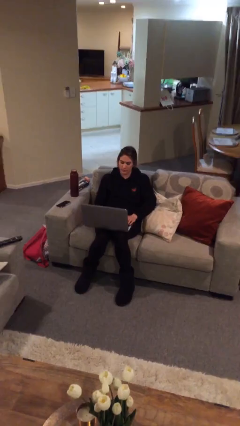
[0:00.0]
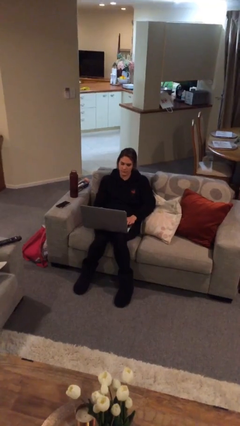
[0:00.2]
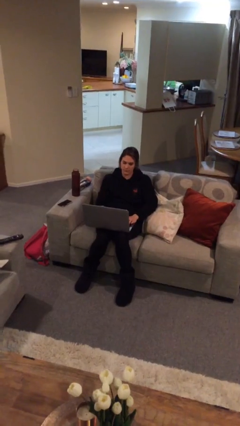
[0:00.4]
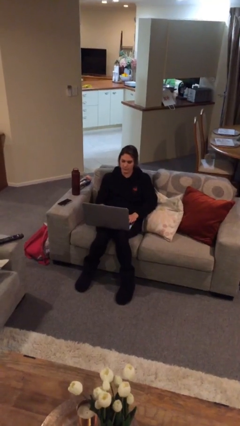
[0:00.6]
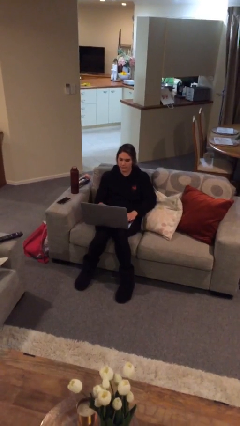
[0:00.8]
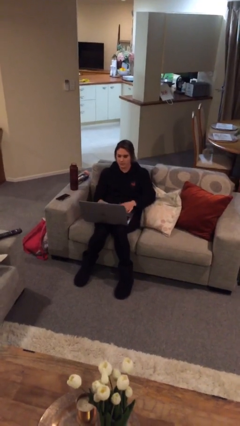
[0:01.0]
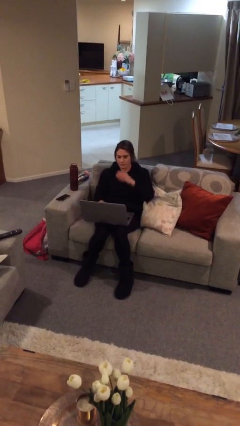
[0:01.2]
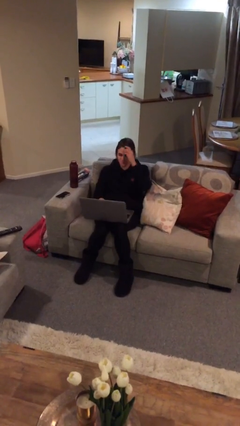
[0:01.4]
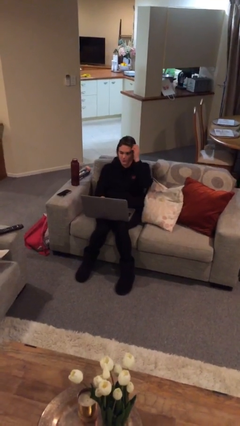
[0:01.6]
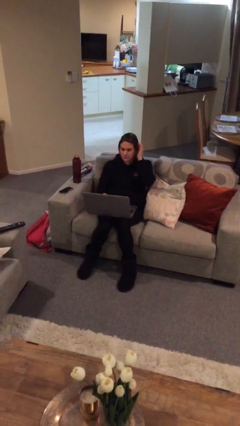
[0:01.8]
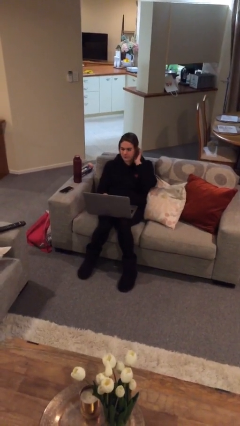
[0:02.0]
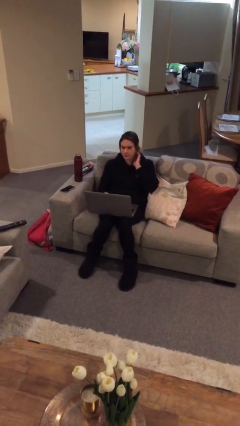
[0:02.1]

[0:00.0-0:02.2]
person interacts with laptop

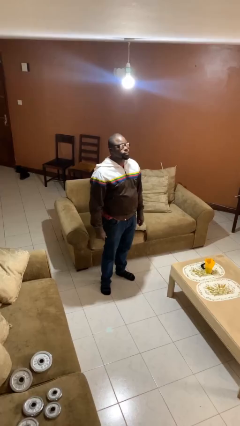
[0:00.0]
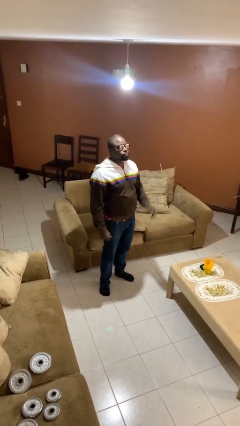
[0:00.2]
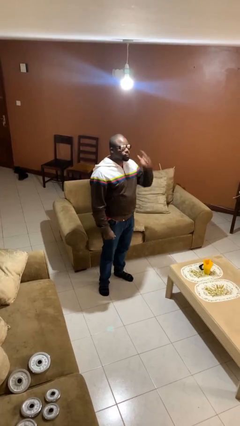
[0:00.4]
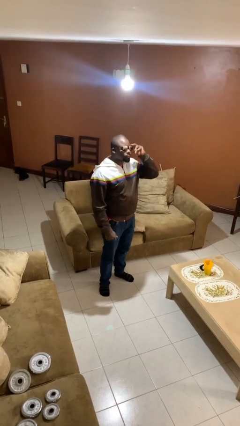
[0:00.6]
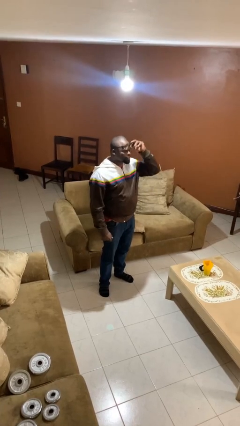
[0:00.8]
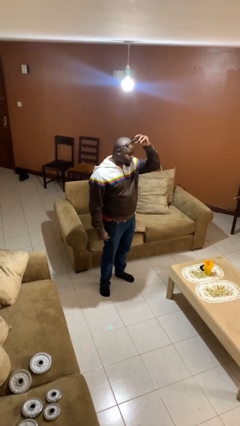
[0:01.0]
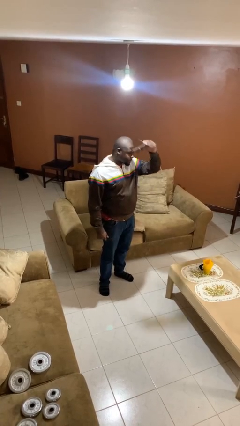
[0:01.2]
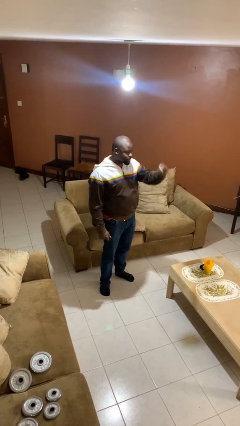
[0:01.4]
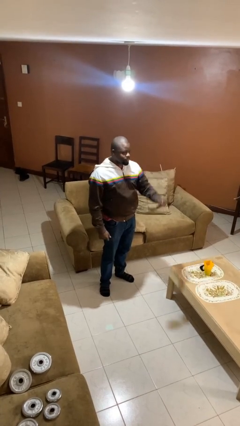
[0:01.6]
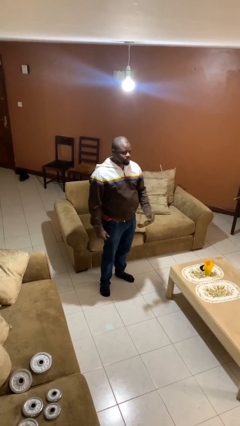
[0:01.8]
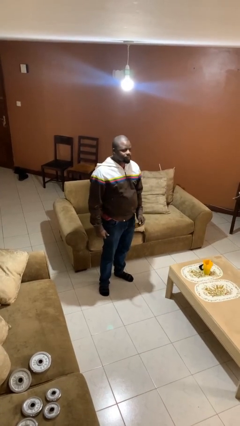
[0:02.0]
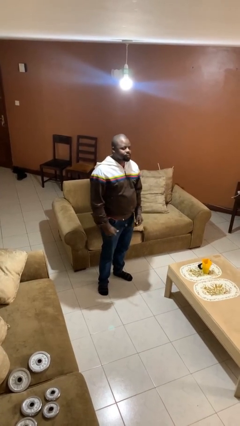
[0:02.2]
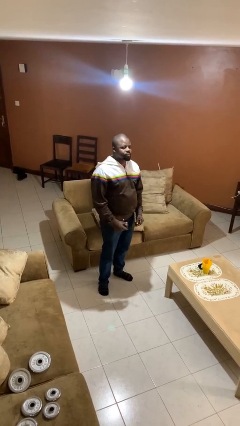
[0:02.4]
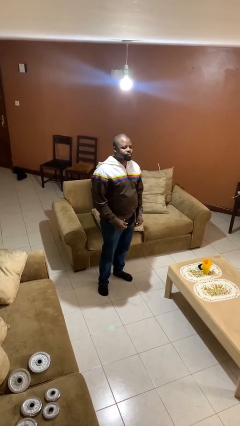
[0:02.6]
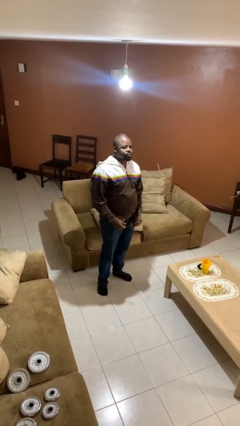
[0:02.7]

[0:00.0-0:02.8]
person takes off sunglasses

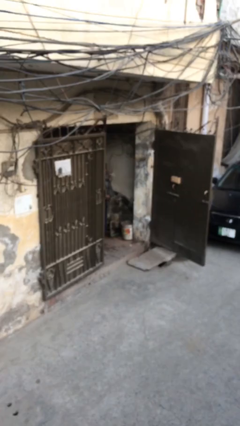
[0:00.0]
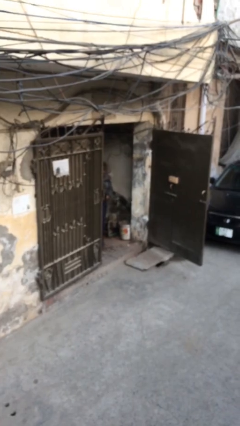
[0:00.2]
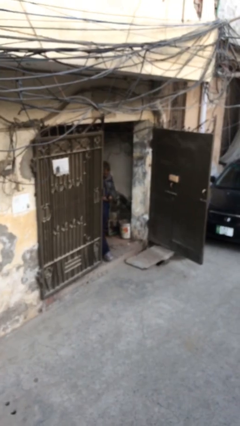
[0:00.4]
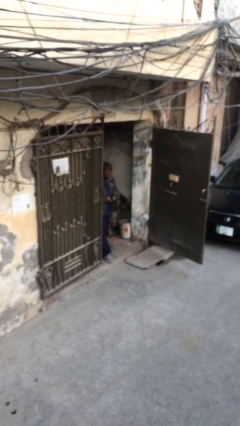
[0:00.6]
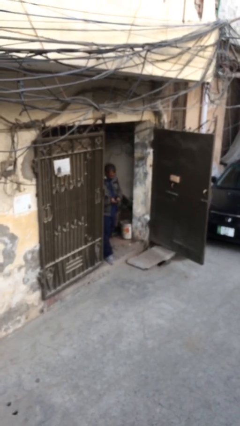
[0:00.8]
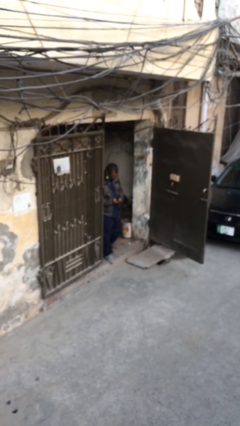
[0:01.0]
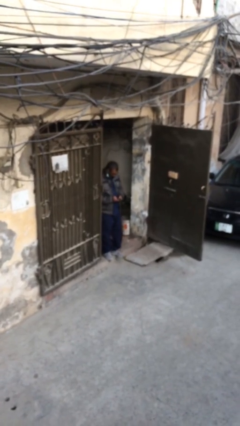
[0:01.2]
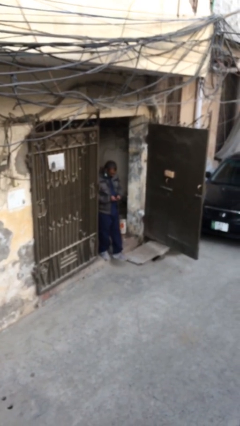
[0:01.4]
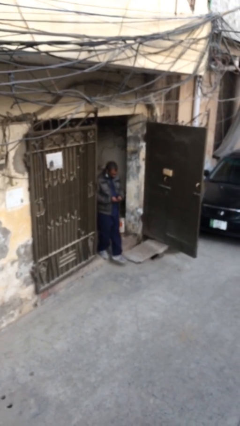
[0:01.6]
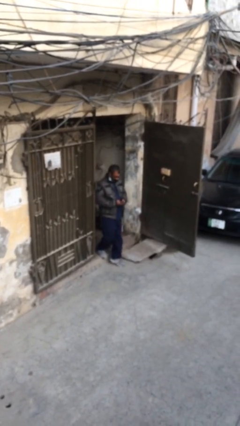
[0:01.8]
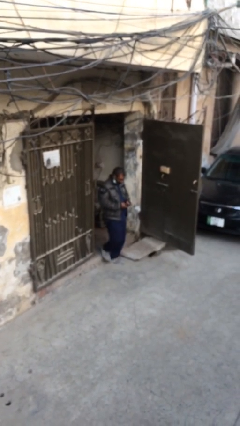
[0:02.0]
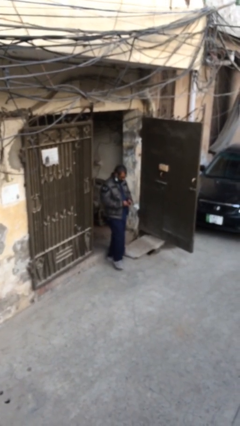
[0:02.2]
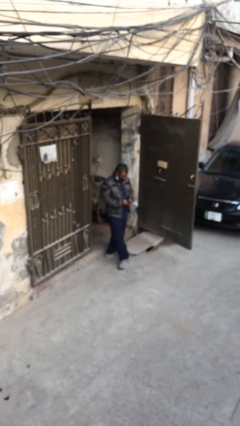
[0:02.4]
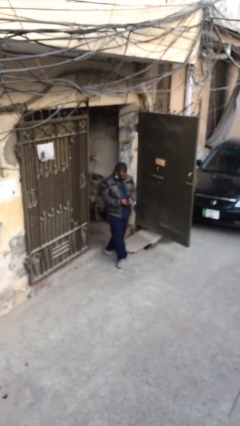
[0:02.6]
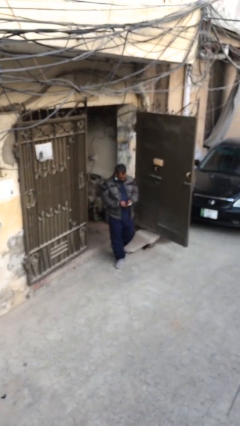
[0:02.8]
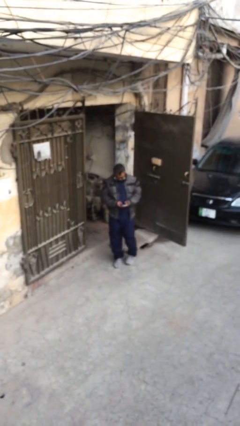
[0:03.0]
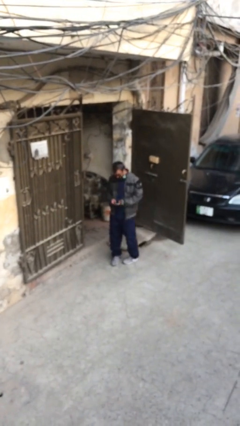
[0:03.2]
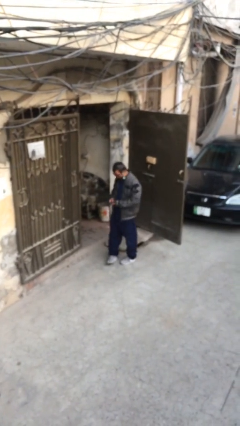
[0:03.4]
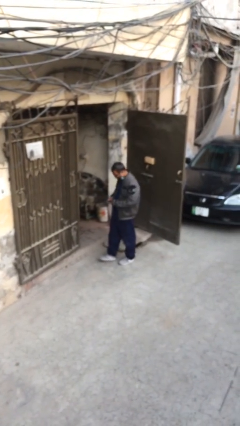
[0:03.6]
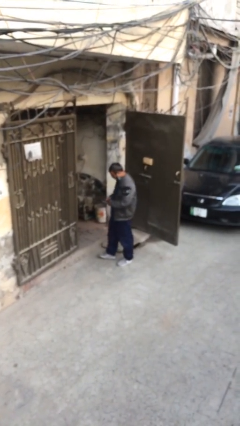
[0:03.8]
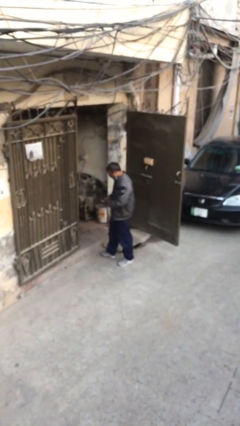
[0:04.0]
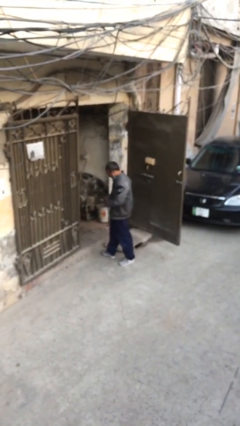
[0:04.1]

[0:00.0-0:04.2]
person enters scene through structure

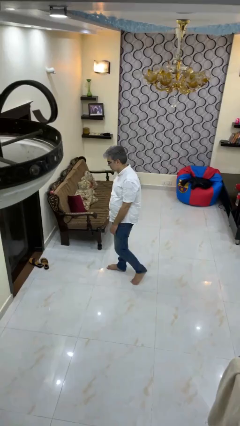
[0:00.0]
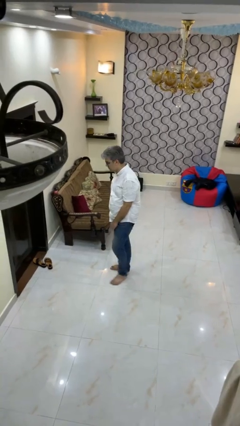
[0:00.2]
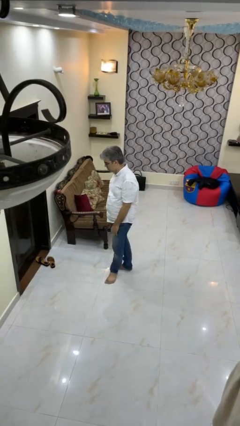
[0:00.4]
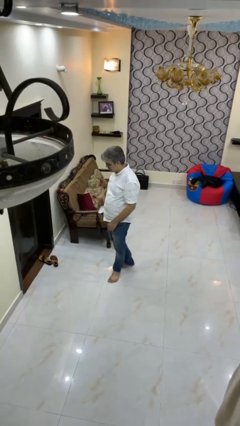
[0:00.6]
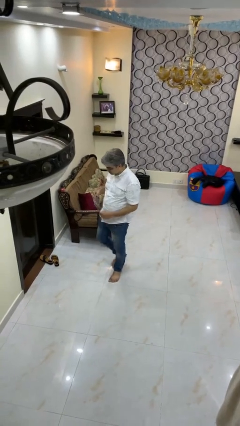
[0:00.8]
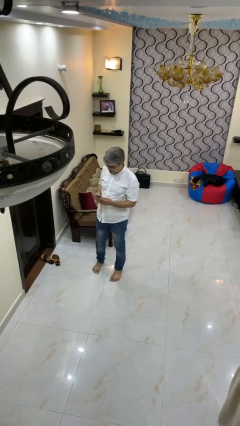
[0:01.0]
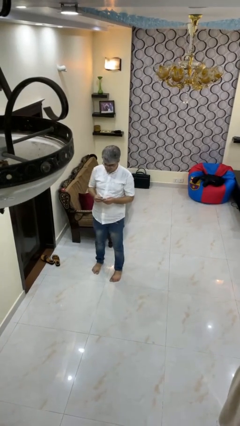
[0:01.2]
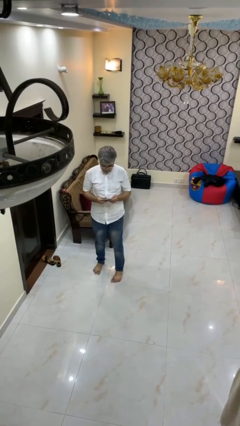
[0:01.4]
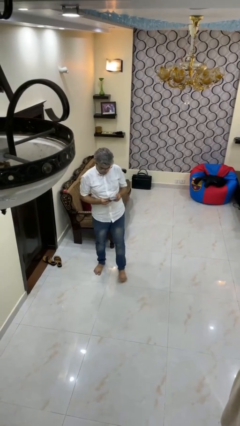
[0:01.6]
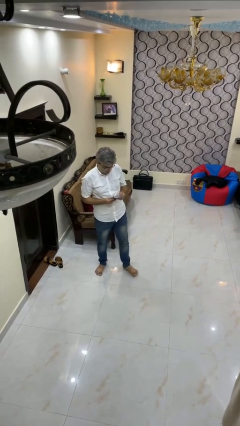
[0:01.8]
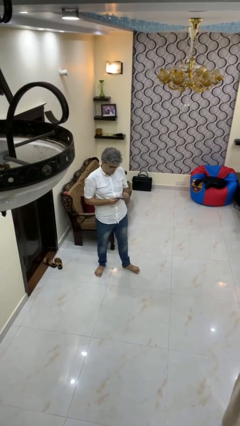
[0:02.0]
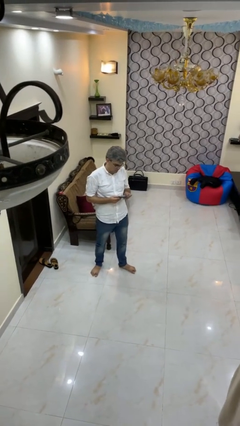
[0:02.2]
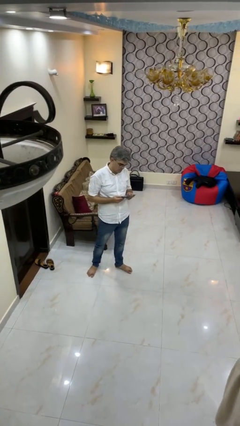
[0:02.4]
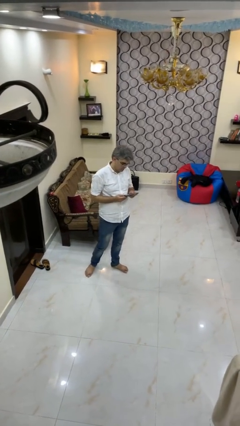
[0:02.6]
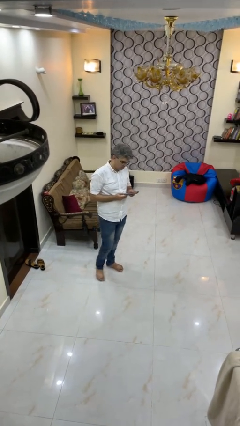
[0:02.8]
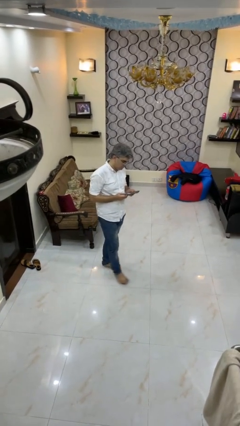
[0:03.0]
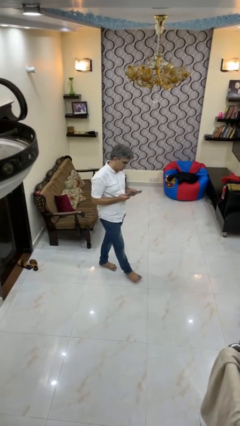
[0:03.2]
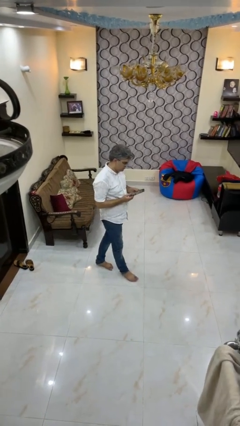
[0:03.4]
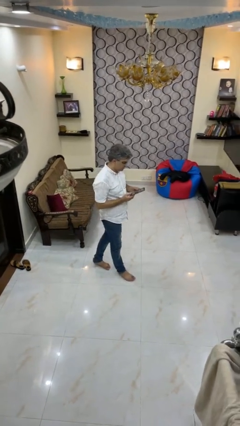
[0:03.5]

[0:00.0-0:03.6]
person takes phone from pocket

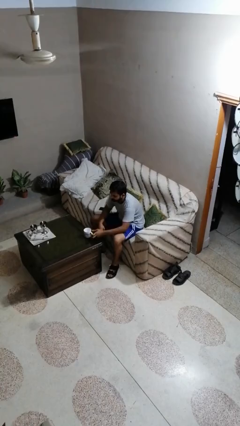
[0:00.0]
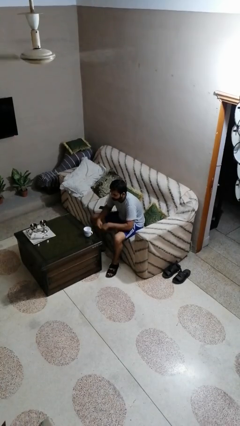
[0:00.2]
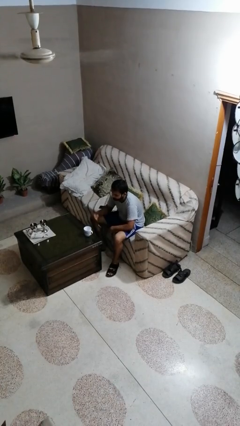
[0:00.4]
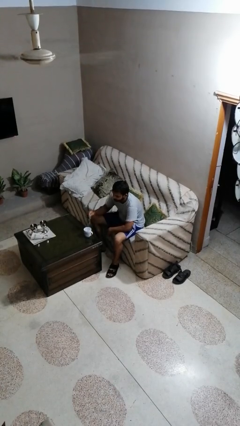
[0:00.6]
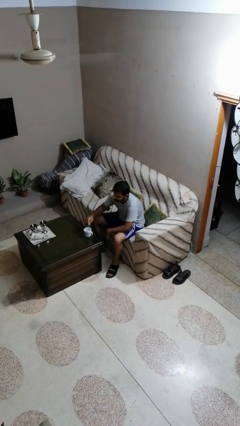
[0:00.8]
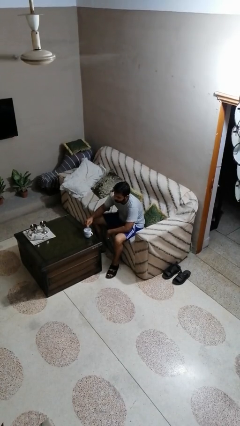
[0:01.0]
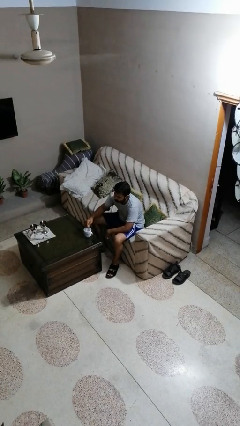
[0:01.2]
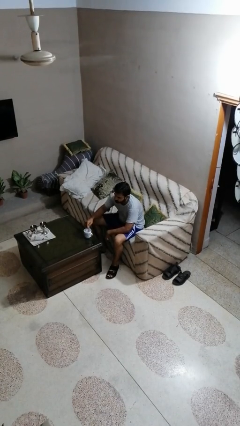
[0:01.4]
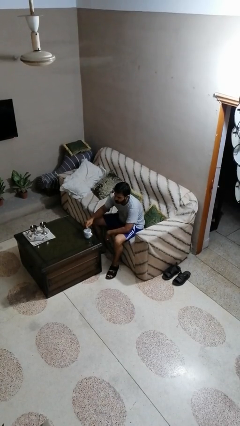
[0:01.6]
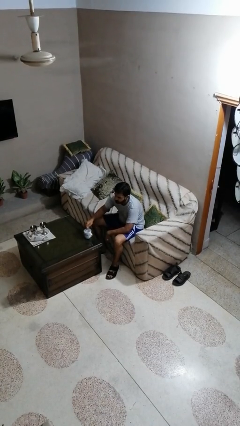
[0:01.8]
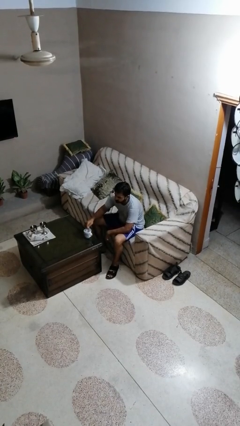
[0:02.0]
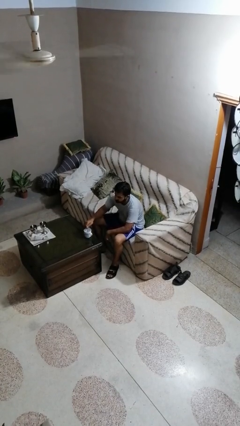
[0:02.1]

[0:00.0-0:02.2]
person stirs mug

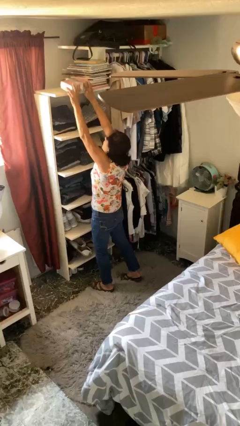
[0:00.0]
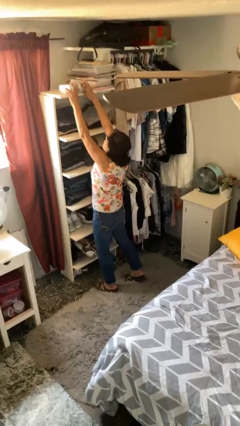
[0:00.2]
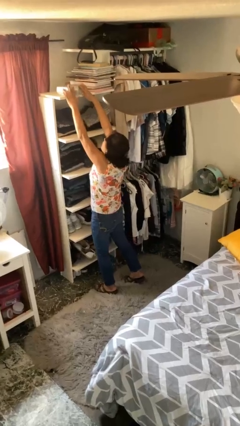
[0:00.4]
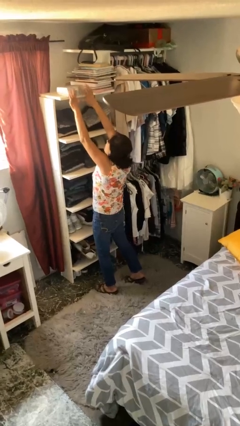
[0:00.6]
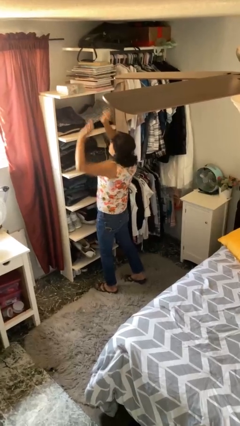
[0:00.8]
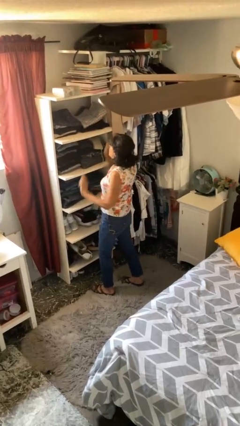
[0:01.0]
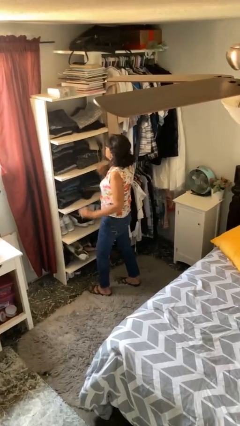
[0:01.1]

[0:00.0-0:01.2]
person puts down object on shelf

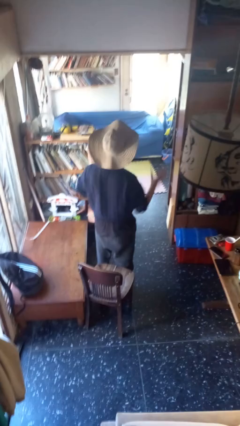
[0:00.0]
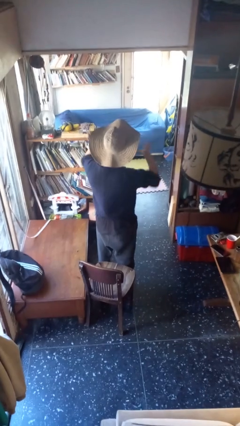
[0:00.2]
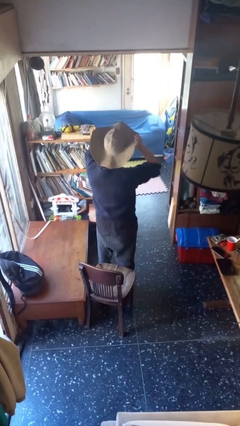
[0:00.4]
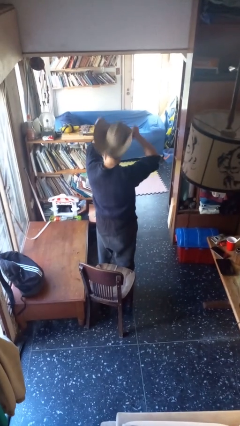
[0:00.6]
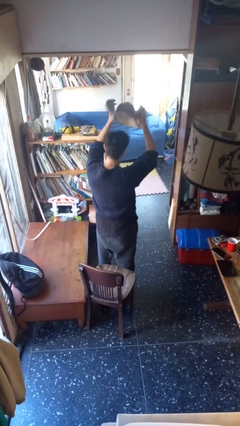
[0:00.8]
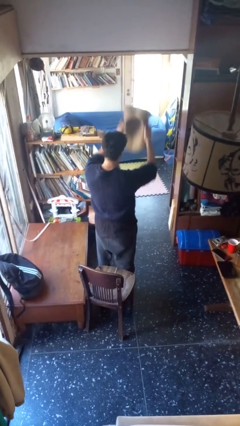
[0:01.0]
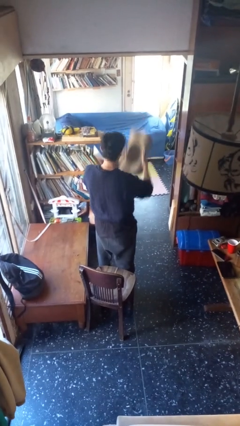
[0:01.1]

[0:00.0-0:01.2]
person takes off hat

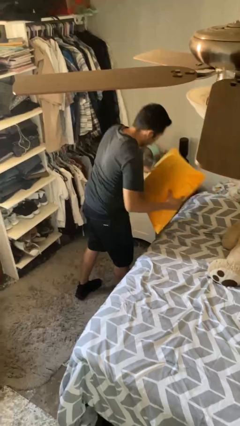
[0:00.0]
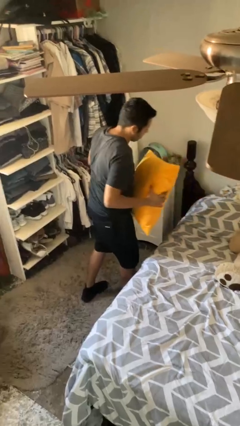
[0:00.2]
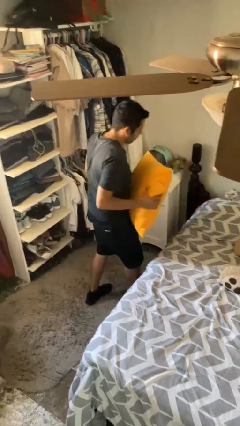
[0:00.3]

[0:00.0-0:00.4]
person picks up object from bed
